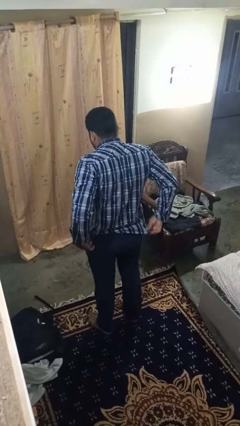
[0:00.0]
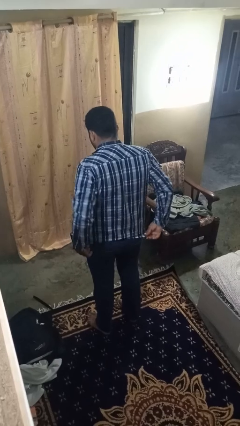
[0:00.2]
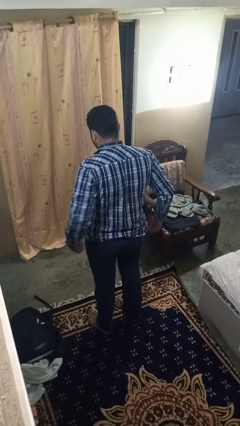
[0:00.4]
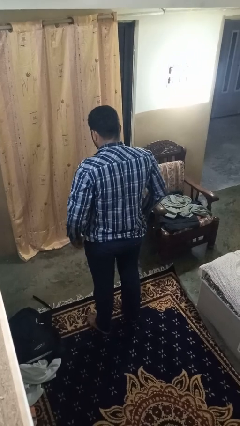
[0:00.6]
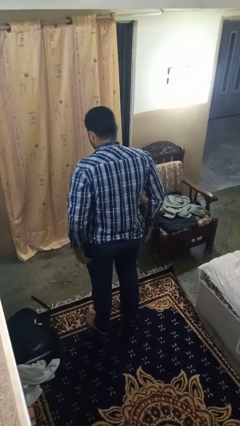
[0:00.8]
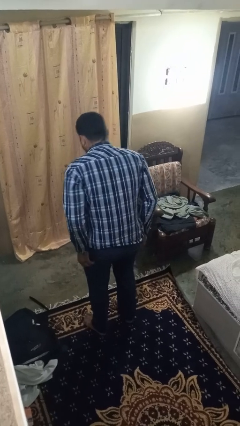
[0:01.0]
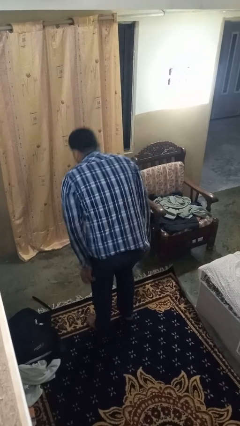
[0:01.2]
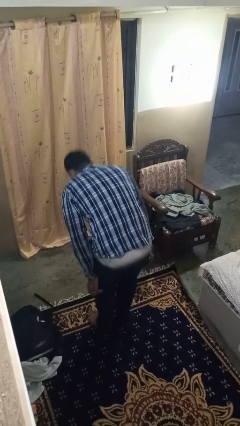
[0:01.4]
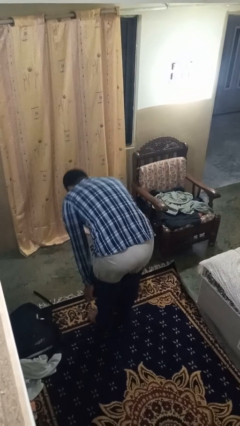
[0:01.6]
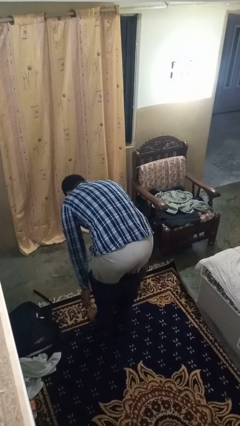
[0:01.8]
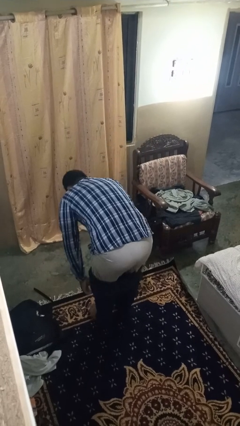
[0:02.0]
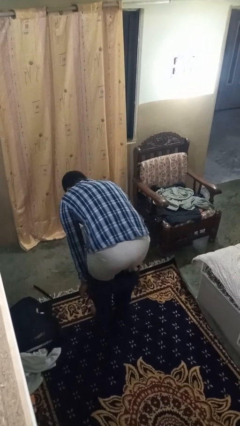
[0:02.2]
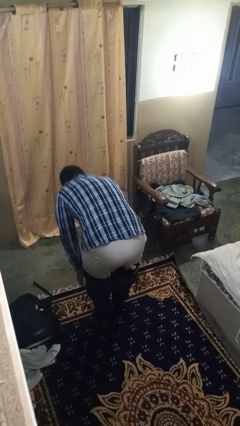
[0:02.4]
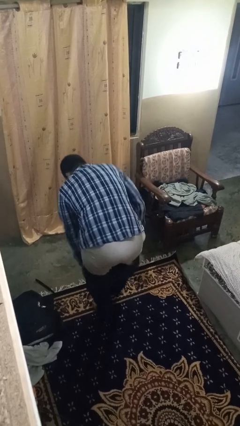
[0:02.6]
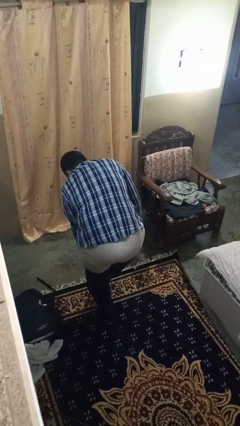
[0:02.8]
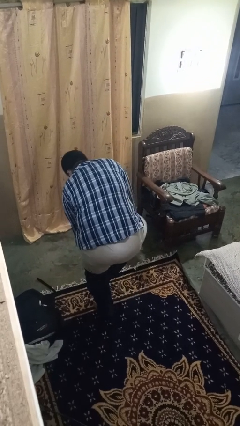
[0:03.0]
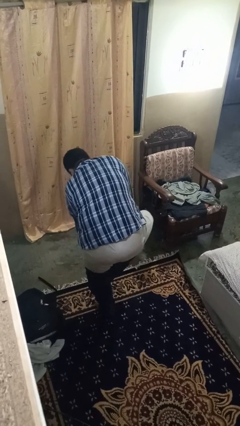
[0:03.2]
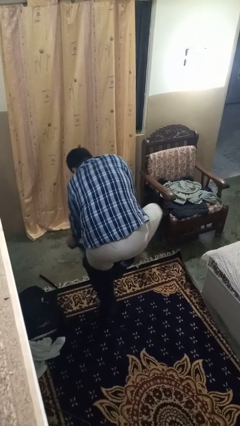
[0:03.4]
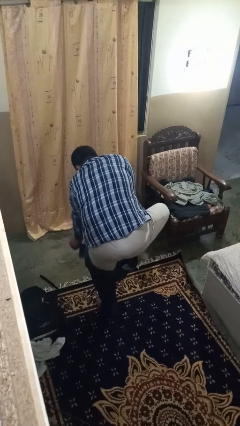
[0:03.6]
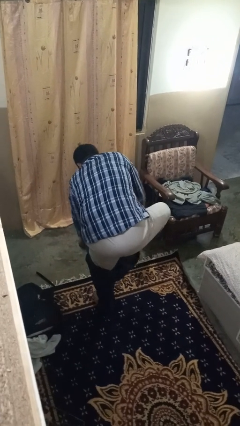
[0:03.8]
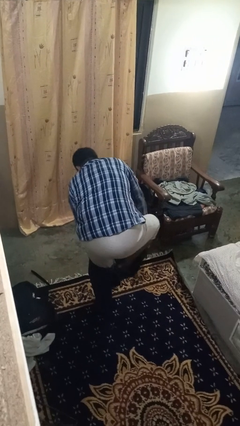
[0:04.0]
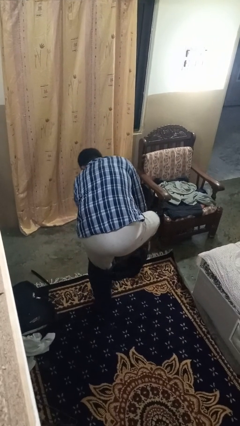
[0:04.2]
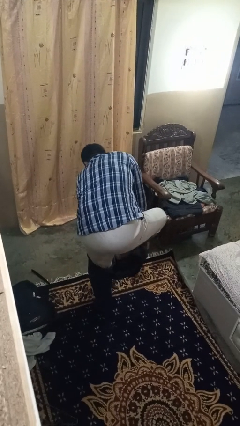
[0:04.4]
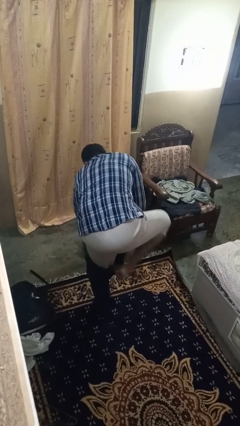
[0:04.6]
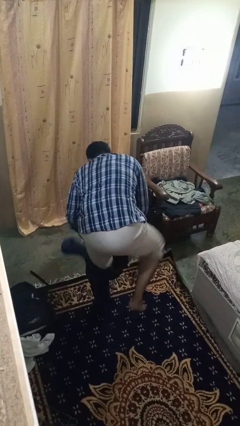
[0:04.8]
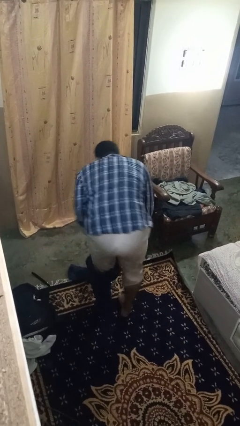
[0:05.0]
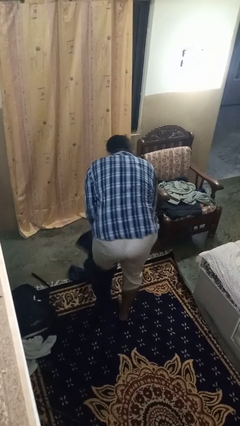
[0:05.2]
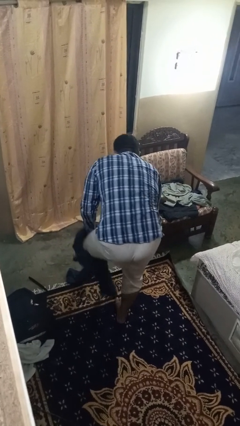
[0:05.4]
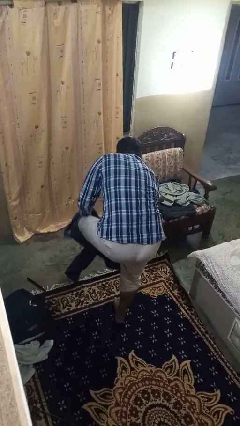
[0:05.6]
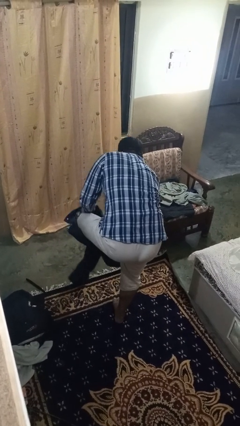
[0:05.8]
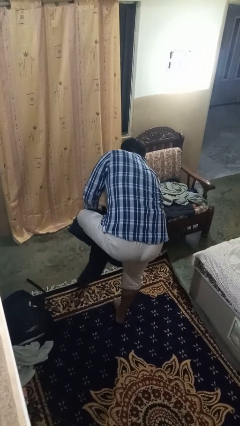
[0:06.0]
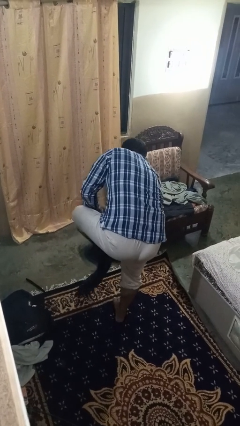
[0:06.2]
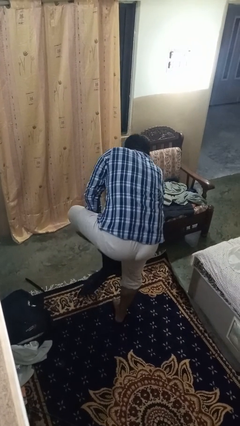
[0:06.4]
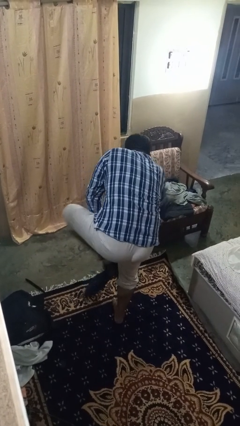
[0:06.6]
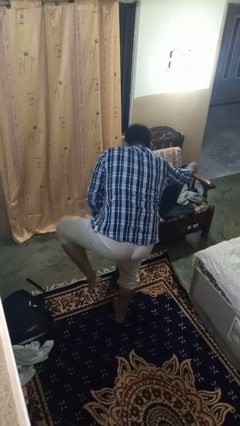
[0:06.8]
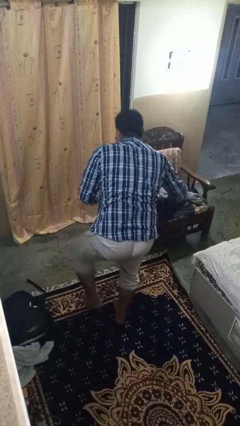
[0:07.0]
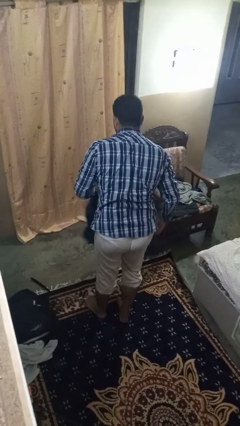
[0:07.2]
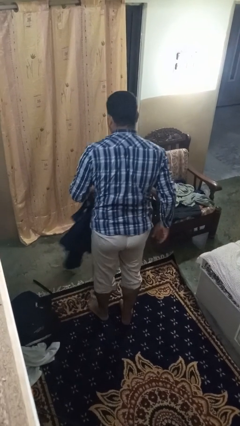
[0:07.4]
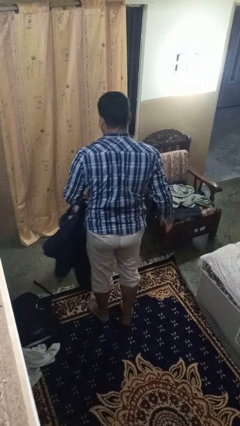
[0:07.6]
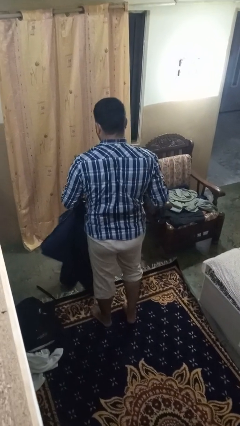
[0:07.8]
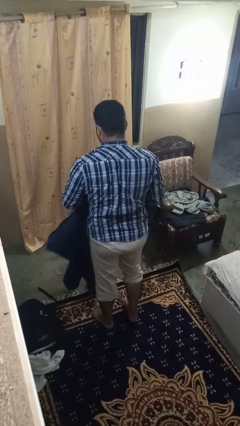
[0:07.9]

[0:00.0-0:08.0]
person takes off pants

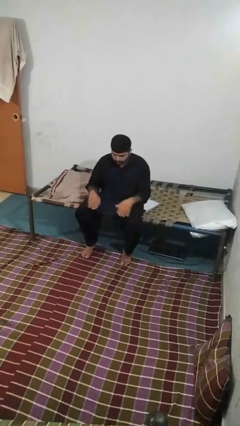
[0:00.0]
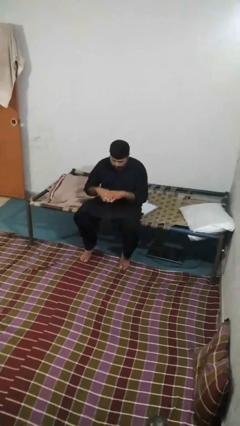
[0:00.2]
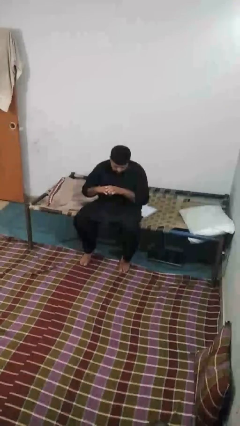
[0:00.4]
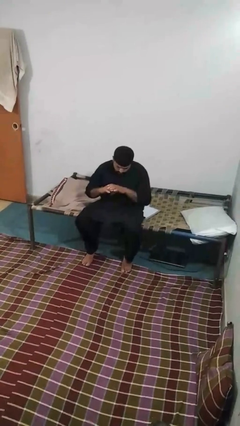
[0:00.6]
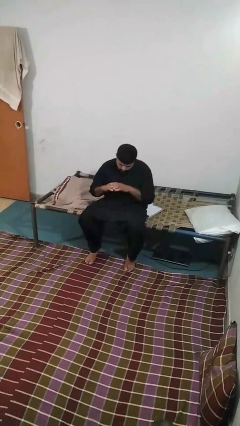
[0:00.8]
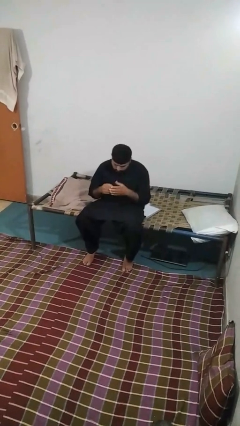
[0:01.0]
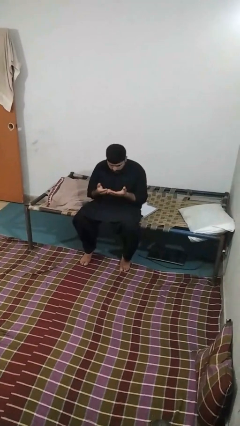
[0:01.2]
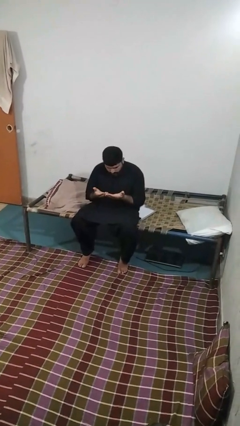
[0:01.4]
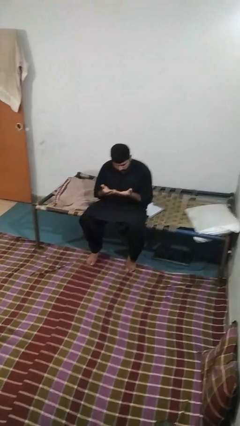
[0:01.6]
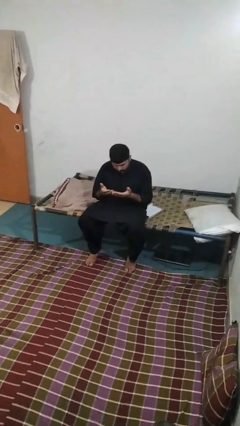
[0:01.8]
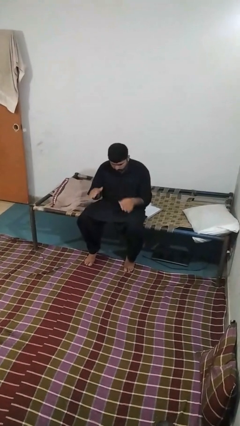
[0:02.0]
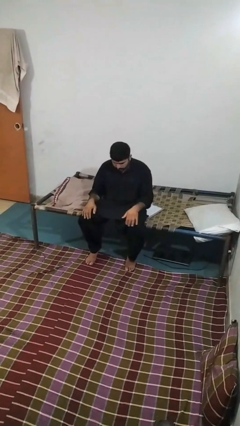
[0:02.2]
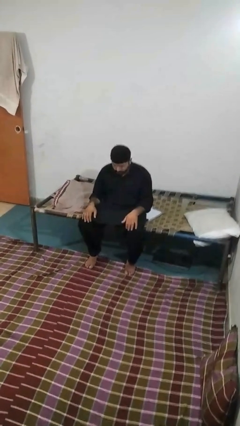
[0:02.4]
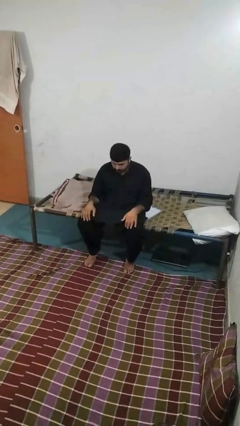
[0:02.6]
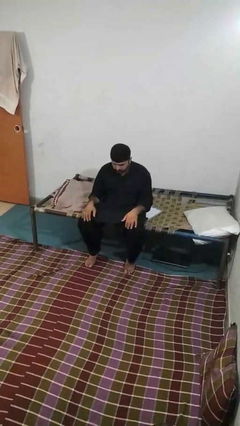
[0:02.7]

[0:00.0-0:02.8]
person looks at hands in lap

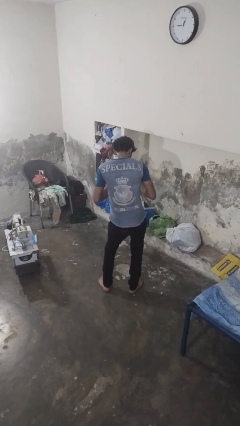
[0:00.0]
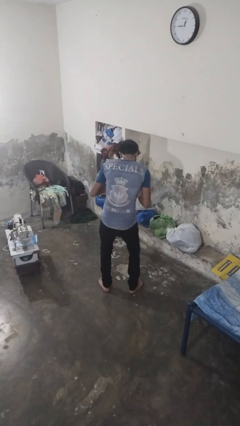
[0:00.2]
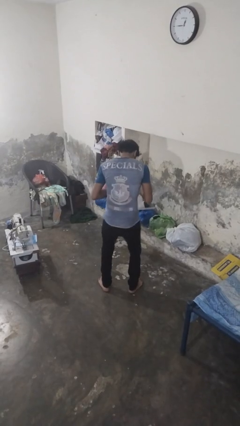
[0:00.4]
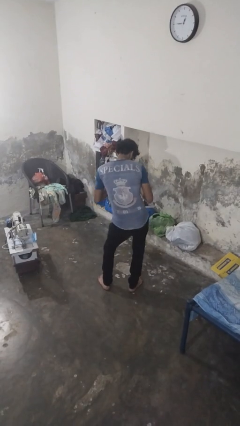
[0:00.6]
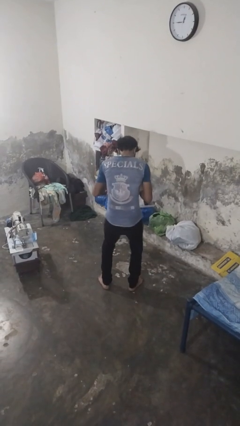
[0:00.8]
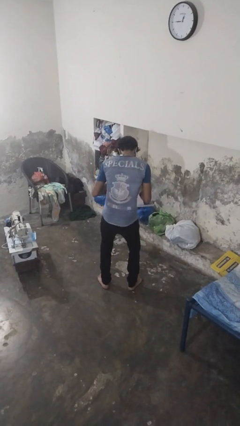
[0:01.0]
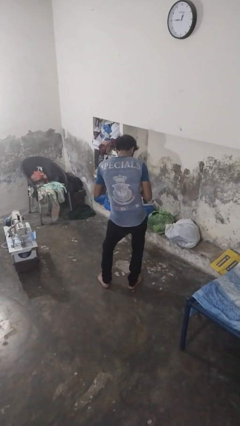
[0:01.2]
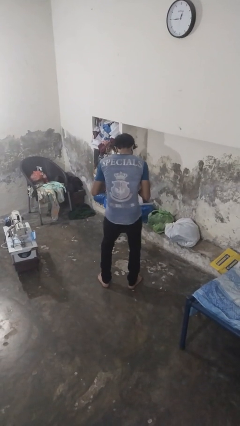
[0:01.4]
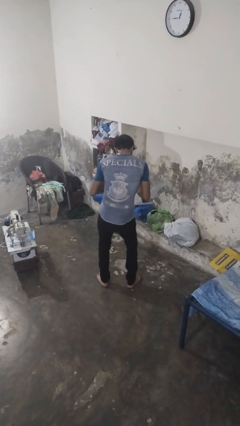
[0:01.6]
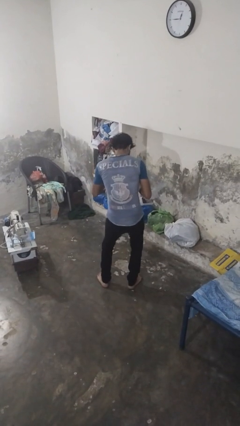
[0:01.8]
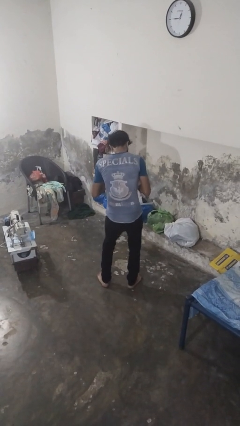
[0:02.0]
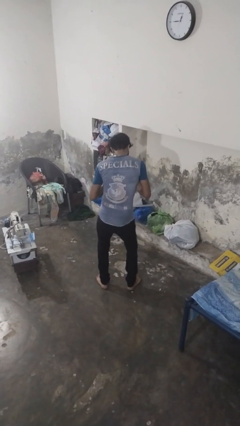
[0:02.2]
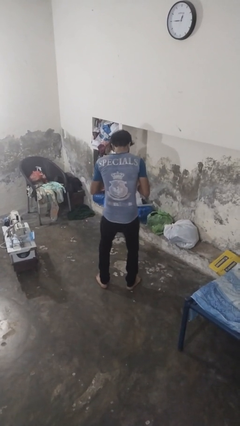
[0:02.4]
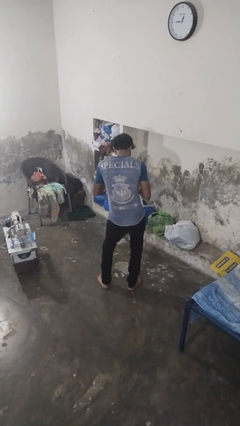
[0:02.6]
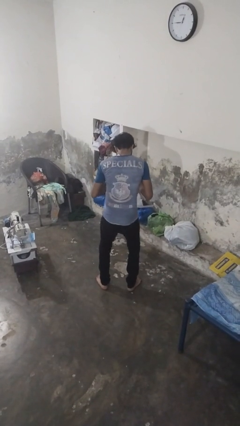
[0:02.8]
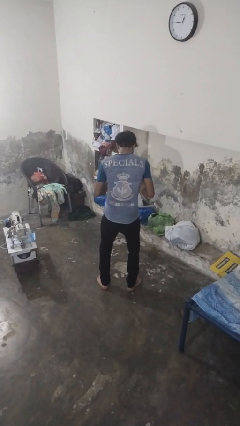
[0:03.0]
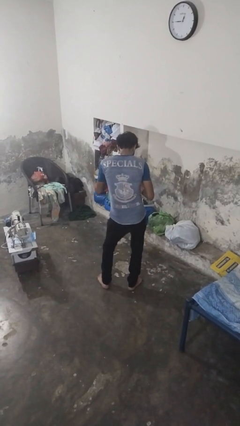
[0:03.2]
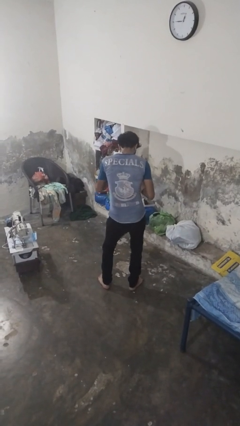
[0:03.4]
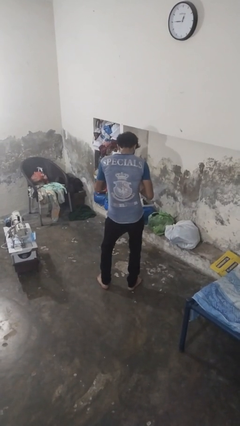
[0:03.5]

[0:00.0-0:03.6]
person wiggles hips

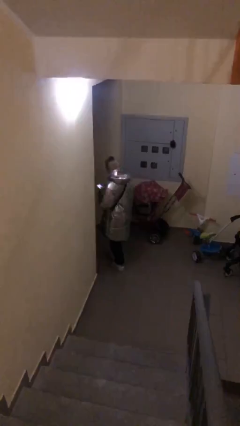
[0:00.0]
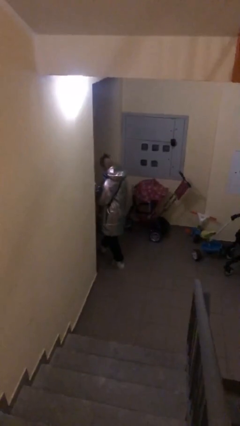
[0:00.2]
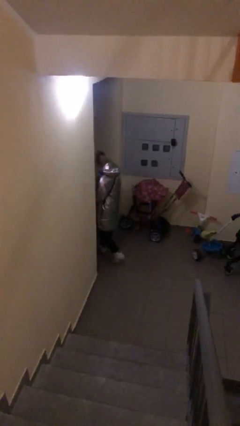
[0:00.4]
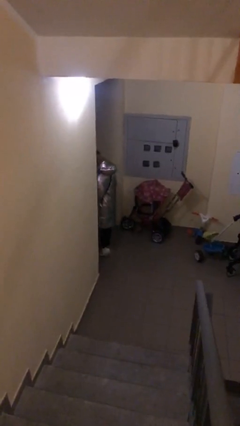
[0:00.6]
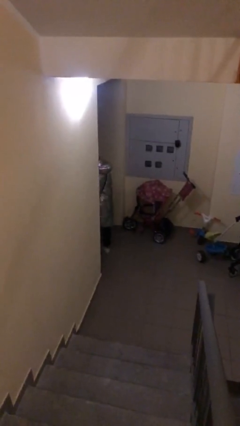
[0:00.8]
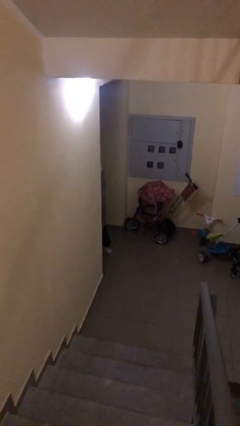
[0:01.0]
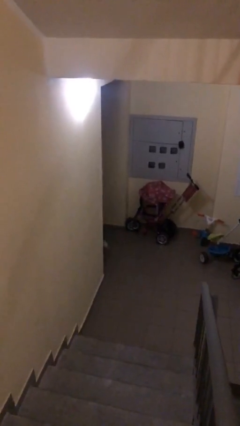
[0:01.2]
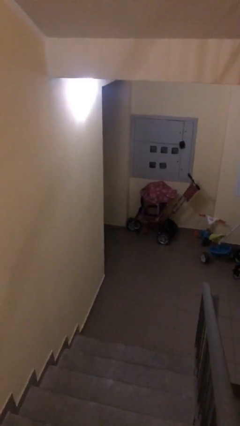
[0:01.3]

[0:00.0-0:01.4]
person exits scene through structure

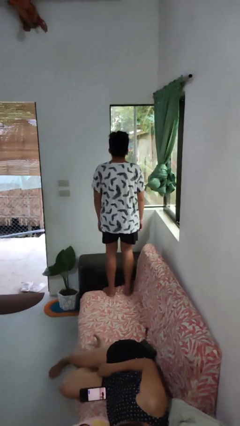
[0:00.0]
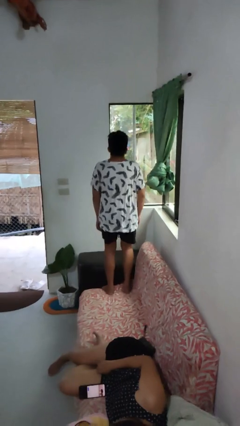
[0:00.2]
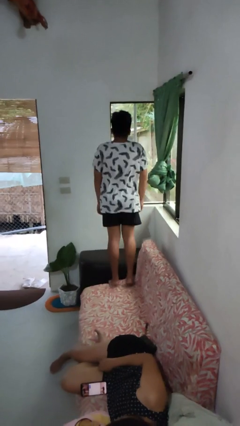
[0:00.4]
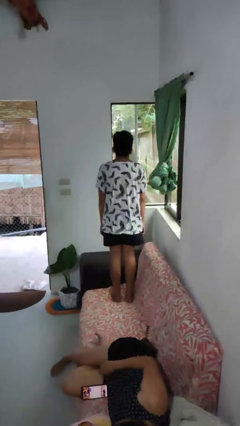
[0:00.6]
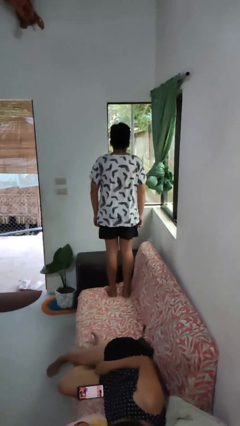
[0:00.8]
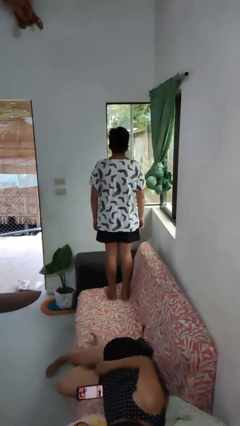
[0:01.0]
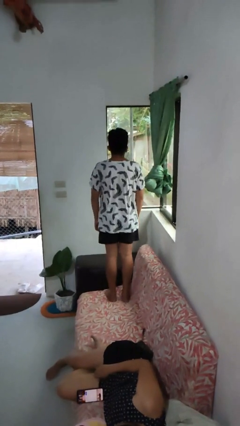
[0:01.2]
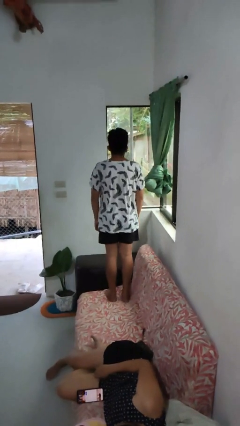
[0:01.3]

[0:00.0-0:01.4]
person jumps on couch

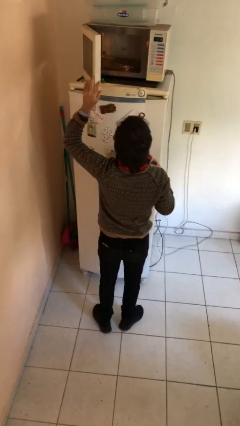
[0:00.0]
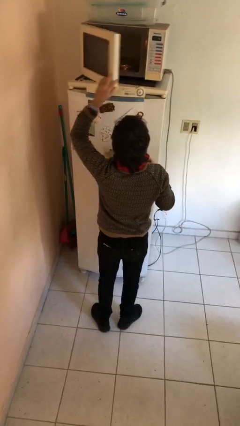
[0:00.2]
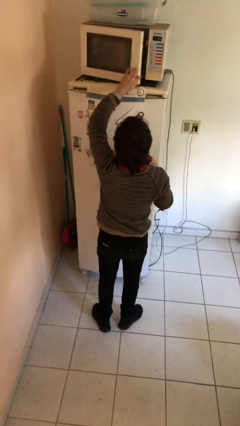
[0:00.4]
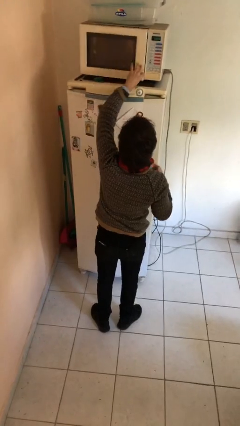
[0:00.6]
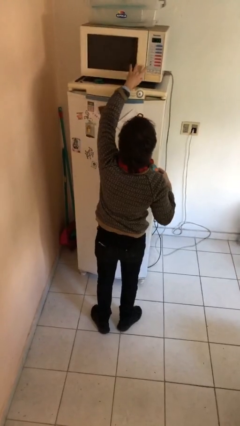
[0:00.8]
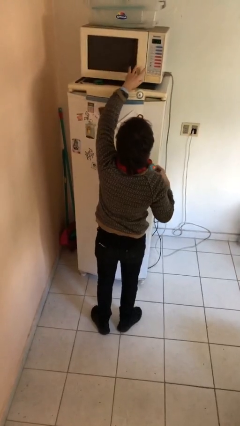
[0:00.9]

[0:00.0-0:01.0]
person closes microwave
